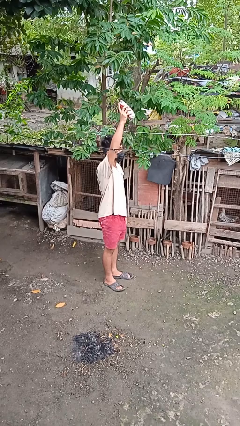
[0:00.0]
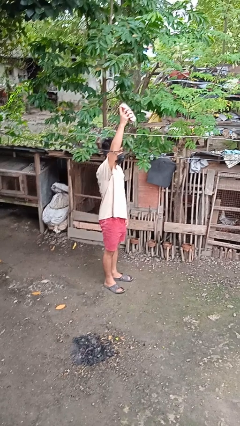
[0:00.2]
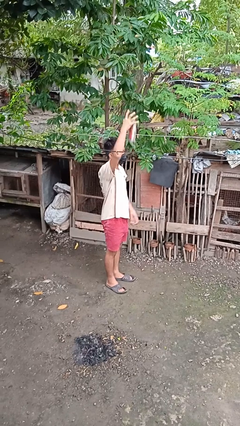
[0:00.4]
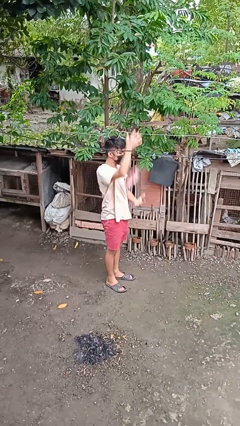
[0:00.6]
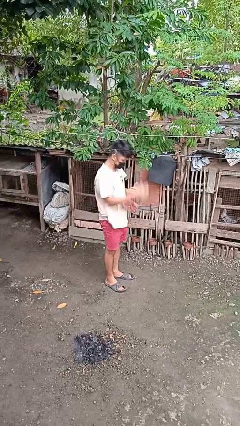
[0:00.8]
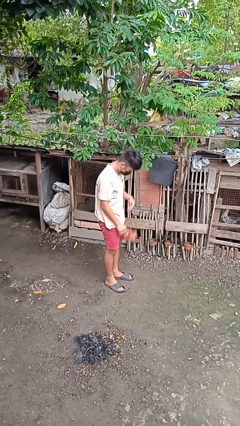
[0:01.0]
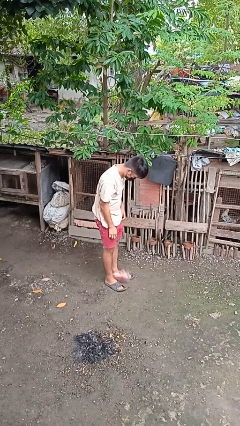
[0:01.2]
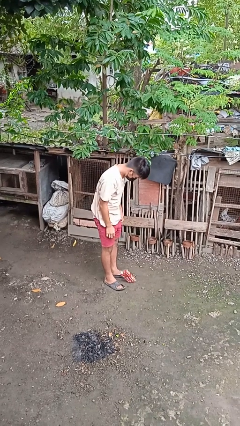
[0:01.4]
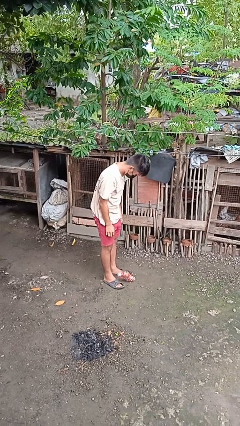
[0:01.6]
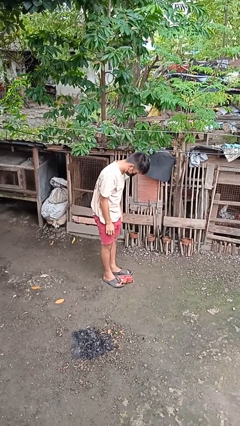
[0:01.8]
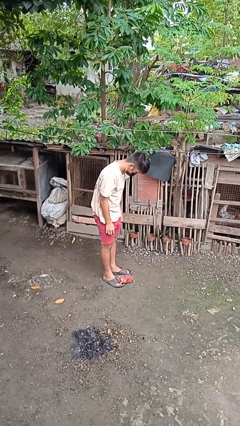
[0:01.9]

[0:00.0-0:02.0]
person drops object

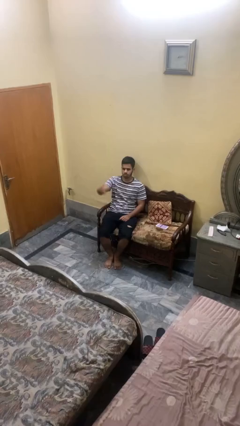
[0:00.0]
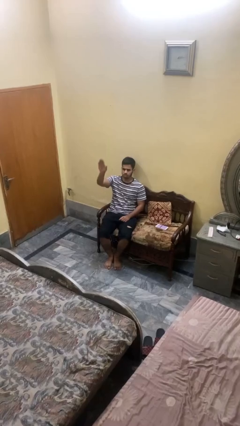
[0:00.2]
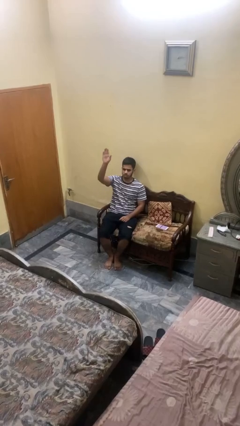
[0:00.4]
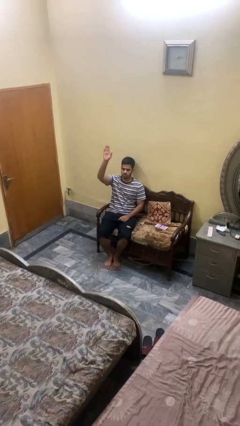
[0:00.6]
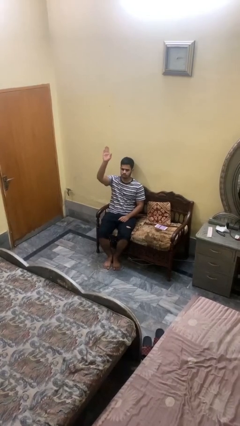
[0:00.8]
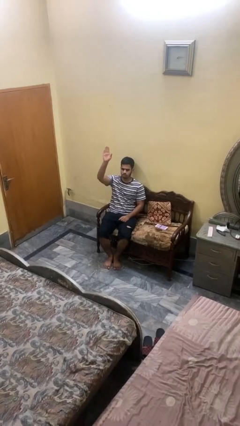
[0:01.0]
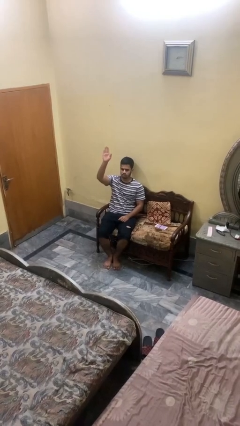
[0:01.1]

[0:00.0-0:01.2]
person gestures raise hand

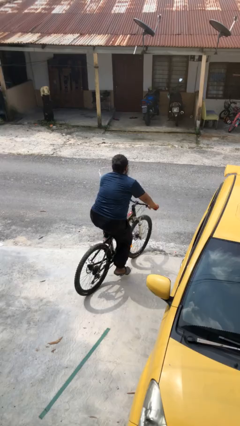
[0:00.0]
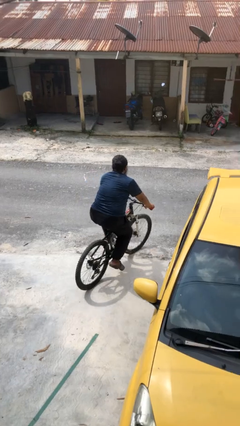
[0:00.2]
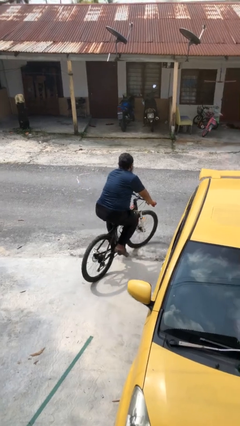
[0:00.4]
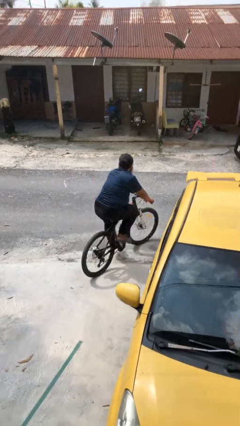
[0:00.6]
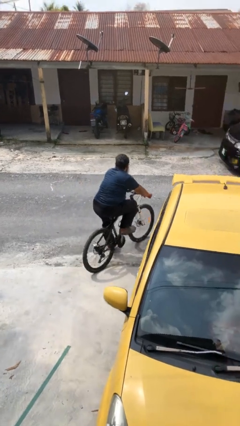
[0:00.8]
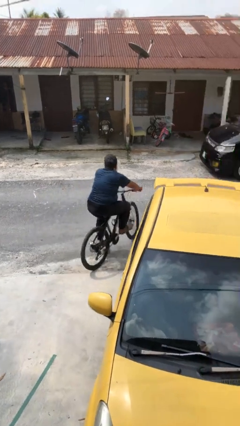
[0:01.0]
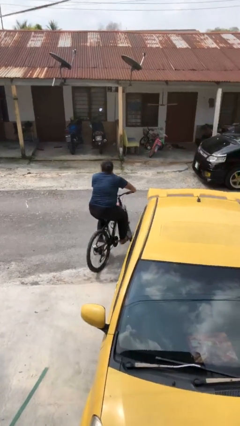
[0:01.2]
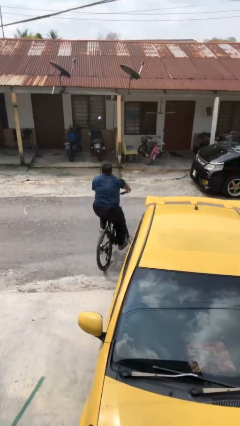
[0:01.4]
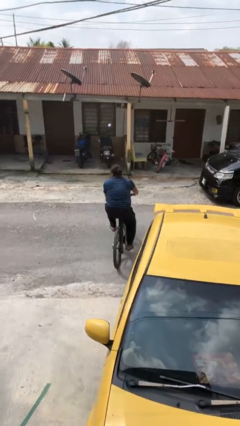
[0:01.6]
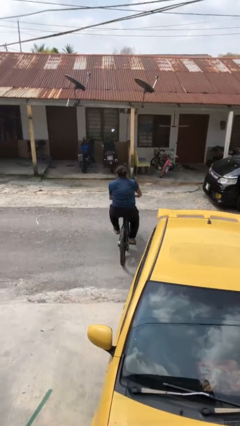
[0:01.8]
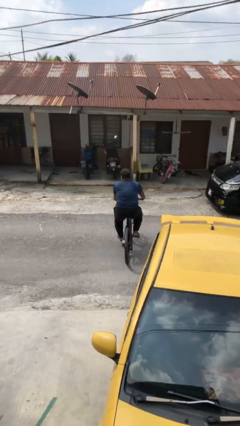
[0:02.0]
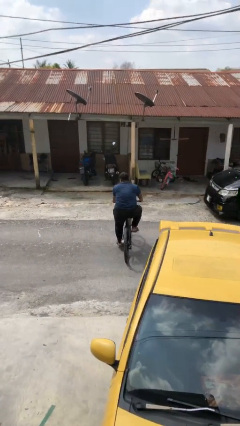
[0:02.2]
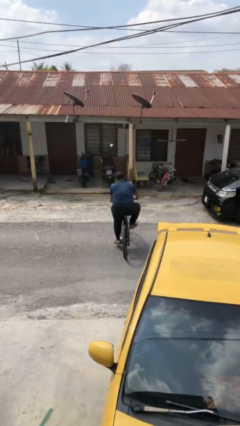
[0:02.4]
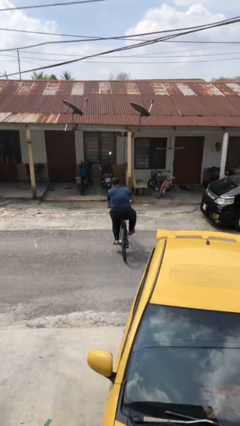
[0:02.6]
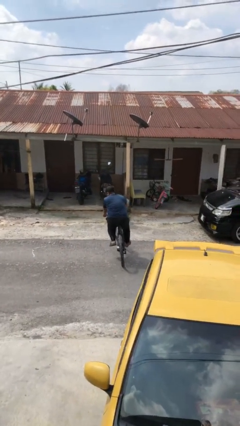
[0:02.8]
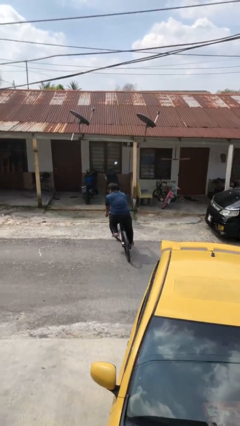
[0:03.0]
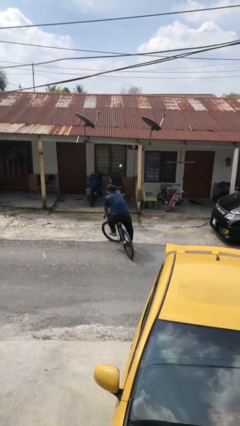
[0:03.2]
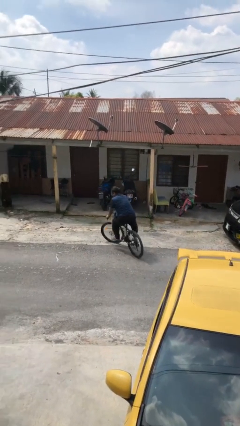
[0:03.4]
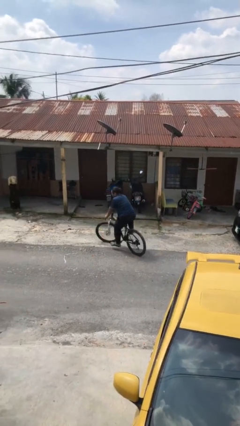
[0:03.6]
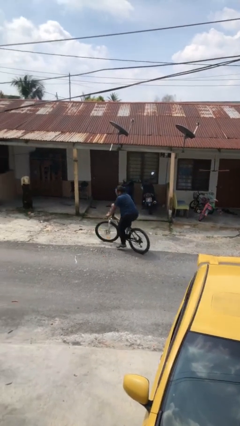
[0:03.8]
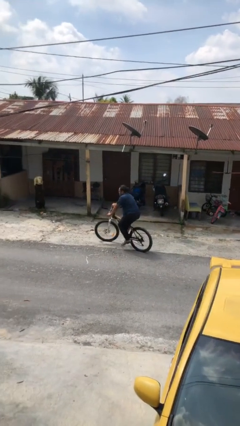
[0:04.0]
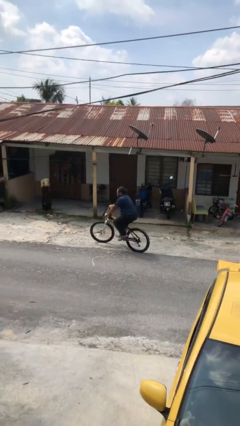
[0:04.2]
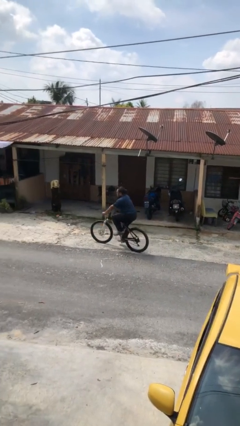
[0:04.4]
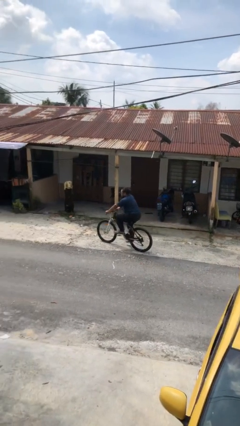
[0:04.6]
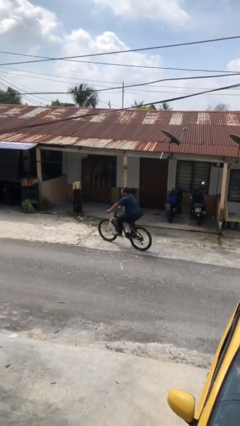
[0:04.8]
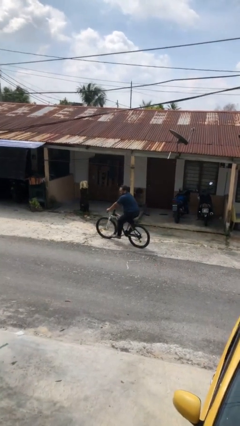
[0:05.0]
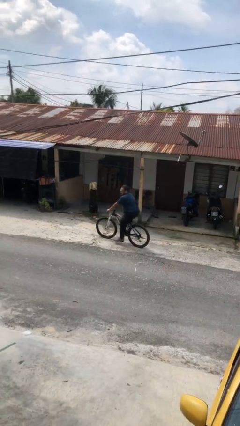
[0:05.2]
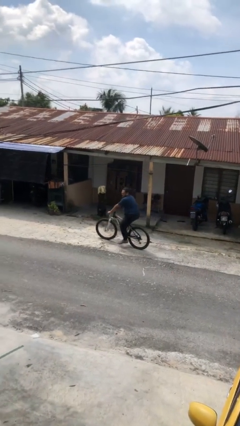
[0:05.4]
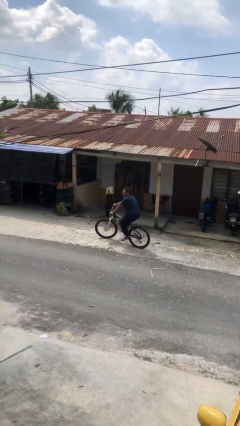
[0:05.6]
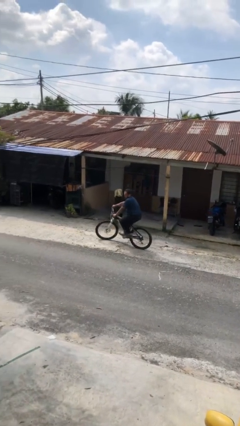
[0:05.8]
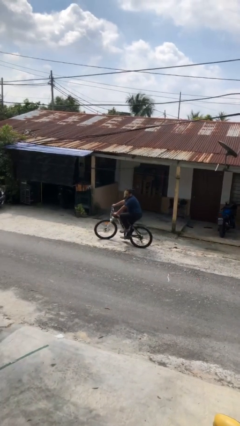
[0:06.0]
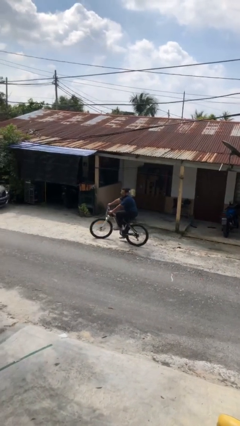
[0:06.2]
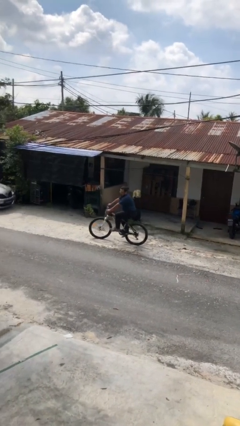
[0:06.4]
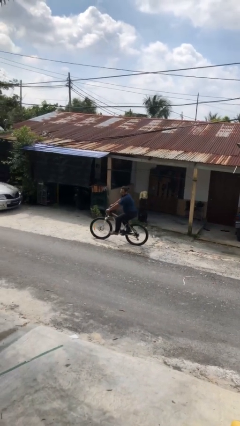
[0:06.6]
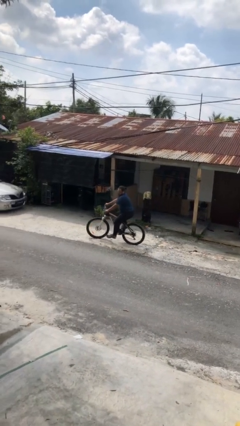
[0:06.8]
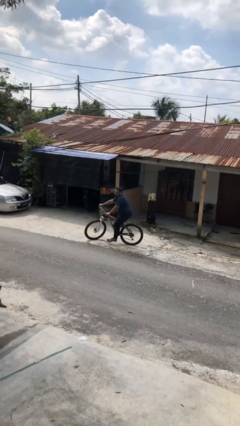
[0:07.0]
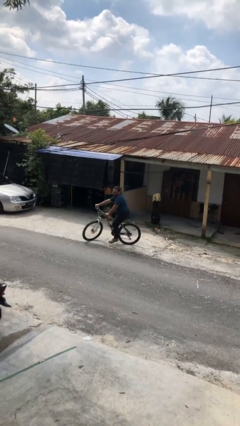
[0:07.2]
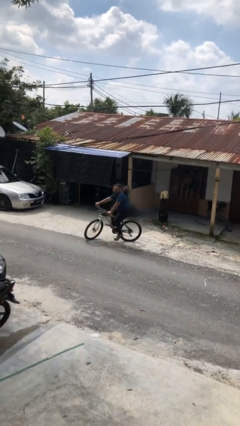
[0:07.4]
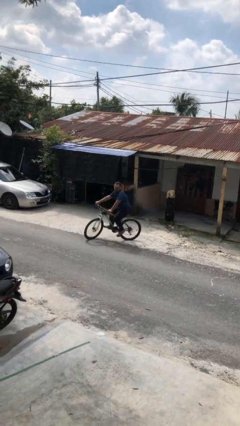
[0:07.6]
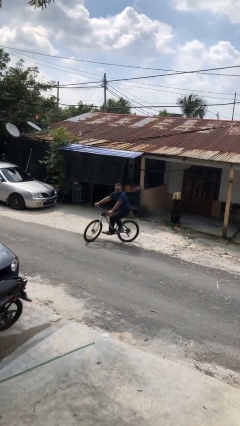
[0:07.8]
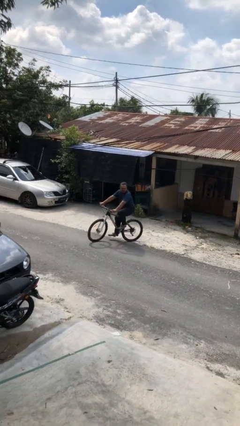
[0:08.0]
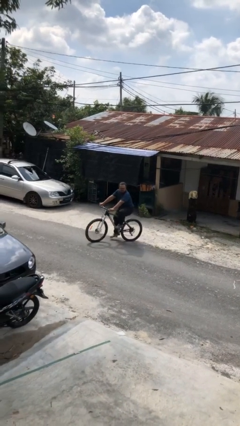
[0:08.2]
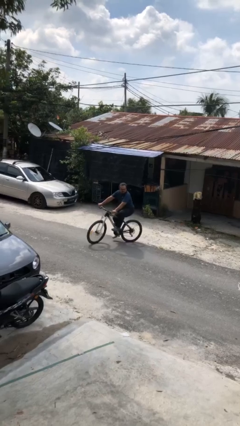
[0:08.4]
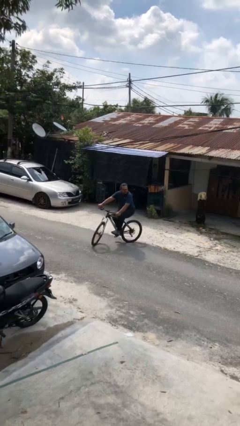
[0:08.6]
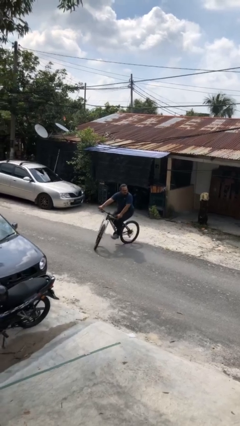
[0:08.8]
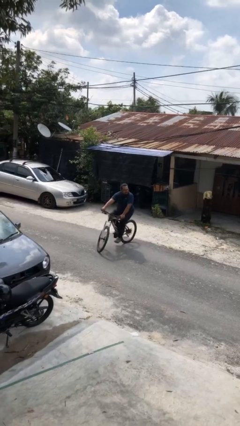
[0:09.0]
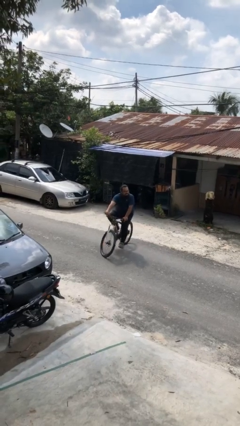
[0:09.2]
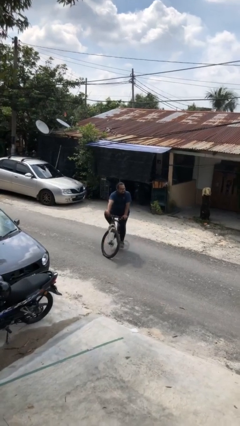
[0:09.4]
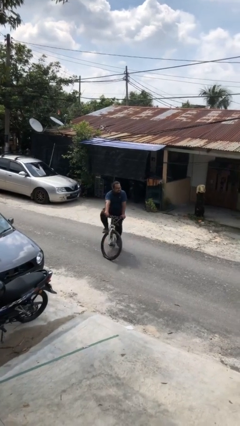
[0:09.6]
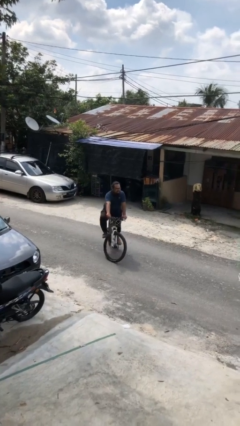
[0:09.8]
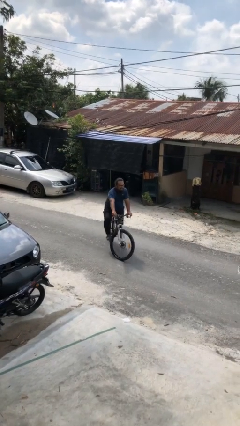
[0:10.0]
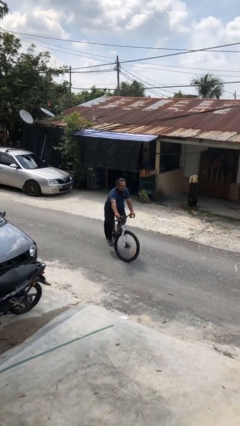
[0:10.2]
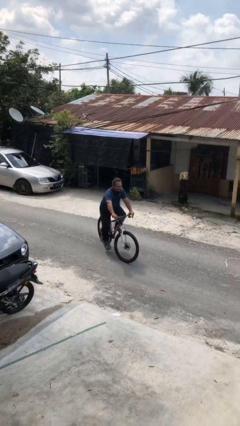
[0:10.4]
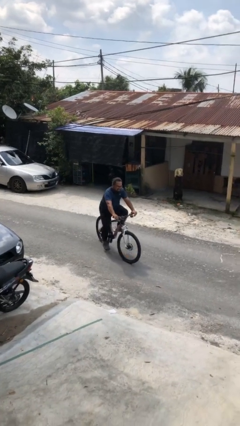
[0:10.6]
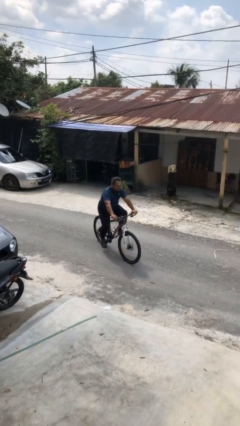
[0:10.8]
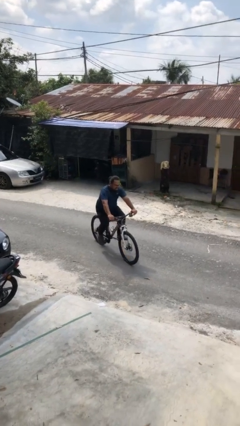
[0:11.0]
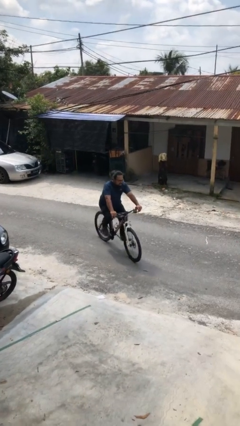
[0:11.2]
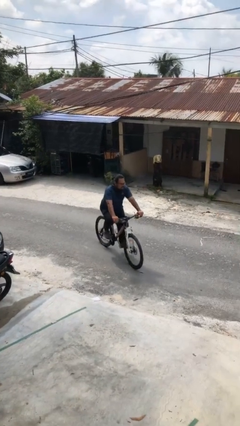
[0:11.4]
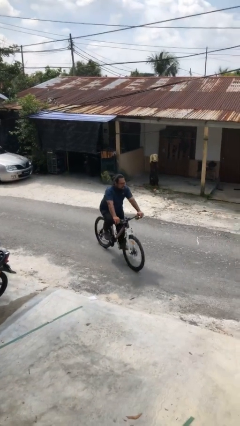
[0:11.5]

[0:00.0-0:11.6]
person rides bicycle

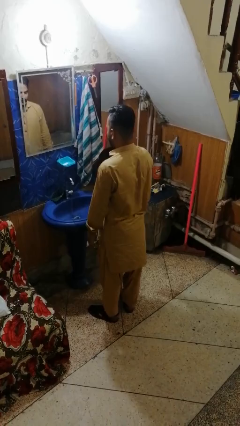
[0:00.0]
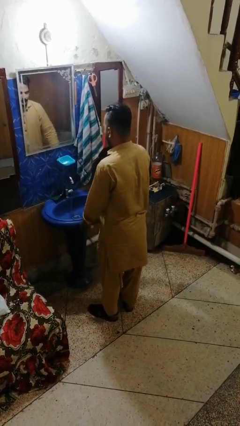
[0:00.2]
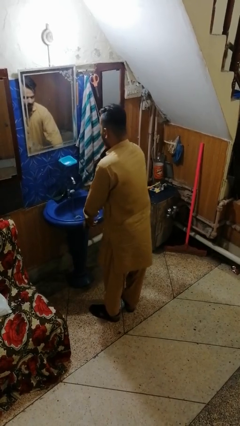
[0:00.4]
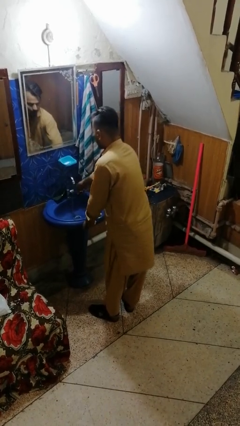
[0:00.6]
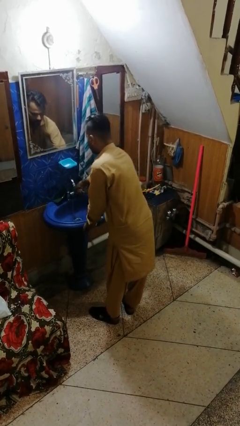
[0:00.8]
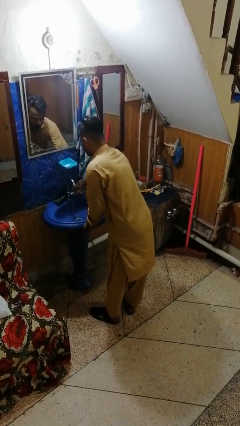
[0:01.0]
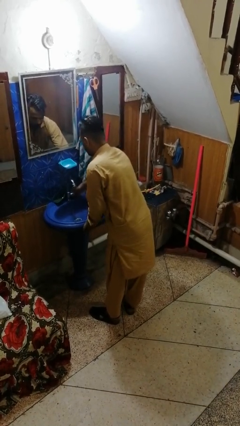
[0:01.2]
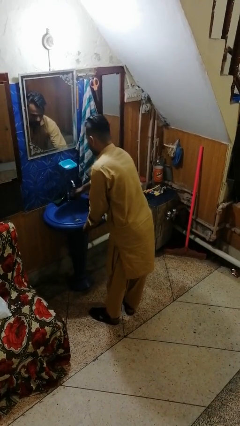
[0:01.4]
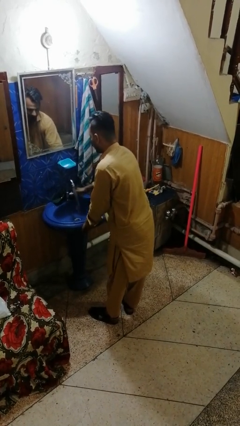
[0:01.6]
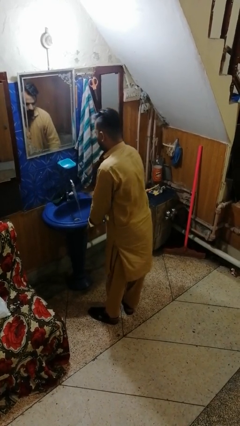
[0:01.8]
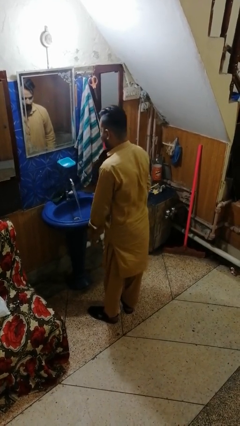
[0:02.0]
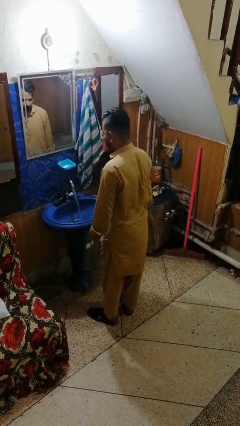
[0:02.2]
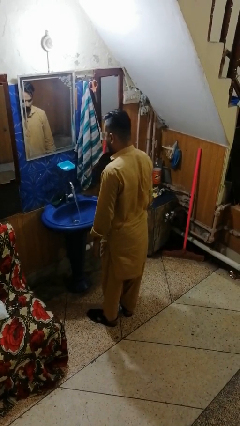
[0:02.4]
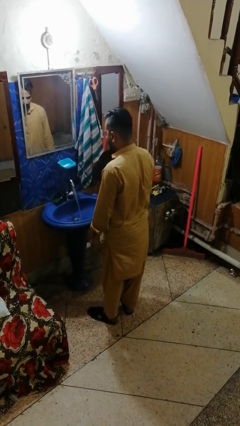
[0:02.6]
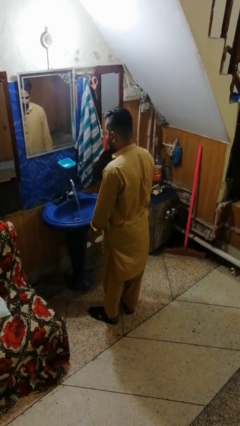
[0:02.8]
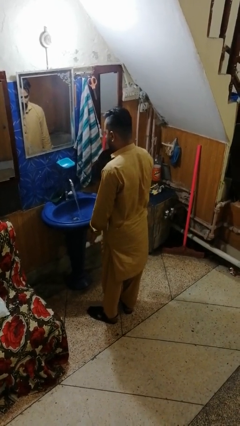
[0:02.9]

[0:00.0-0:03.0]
person turns on faucet
